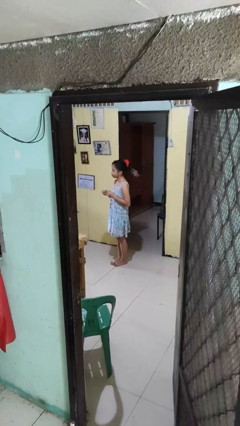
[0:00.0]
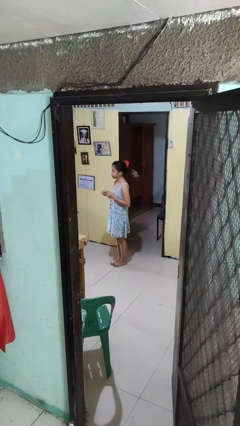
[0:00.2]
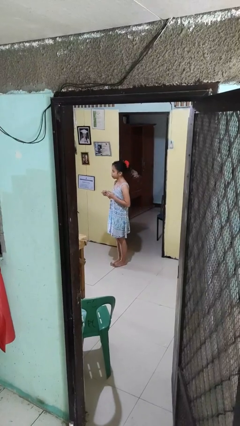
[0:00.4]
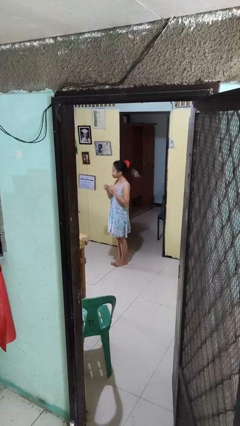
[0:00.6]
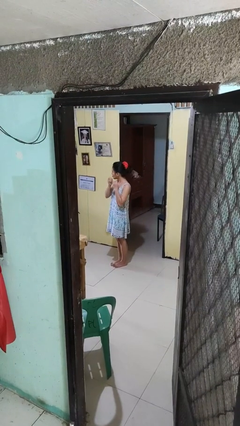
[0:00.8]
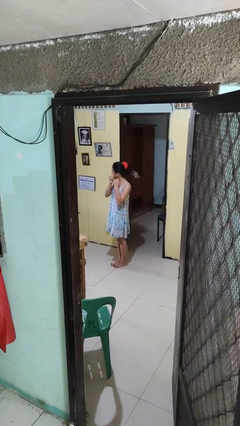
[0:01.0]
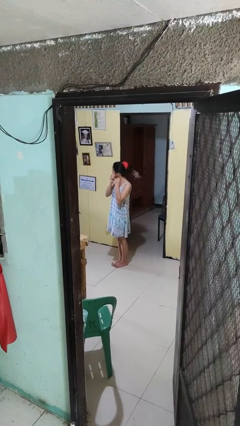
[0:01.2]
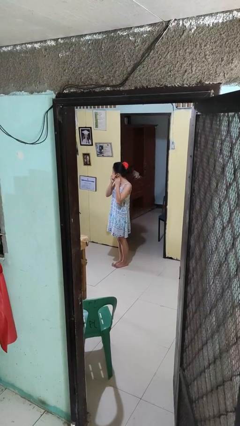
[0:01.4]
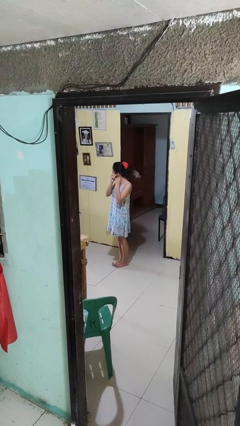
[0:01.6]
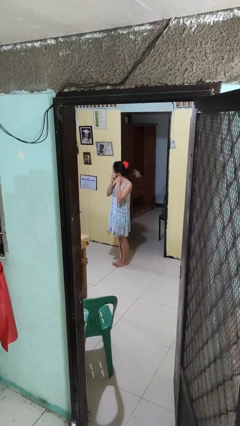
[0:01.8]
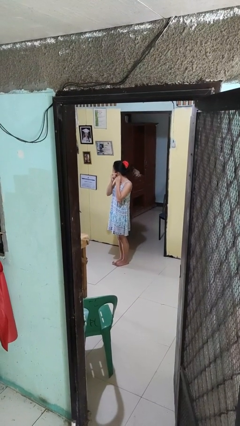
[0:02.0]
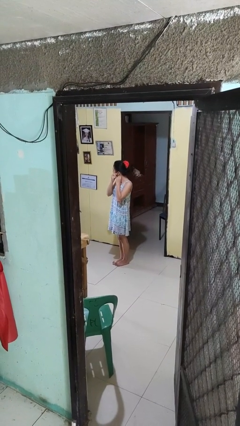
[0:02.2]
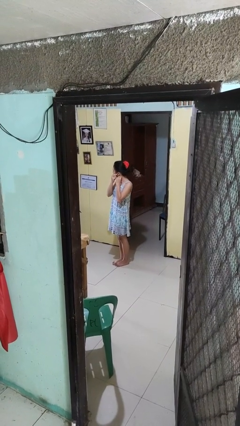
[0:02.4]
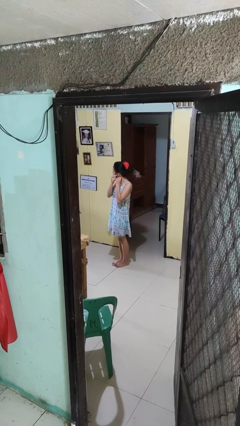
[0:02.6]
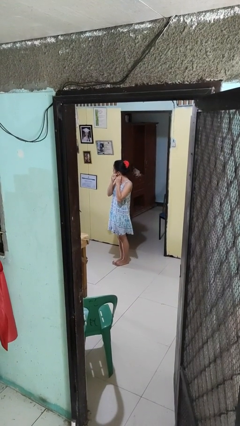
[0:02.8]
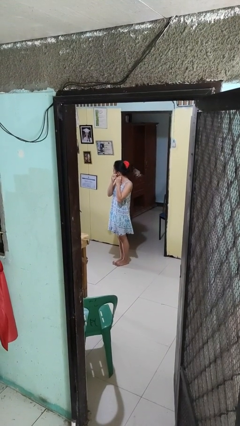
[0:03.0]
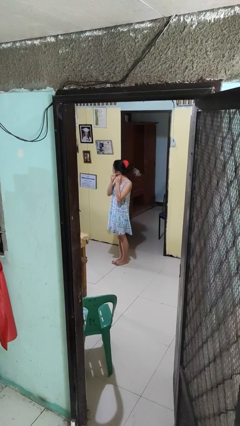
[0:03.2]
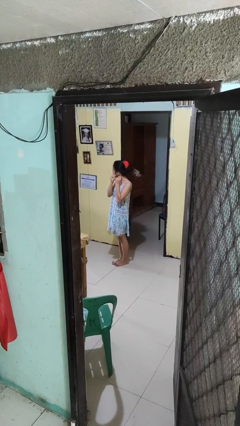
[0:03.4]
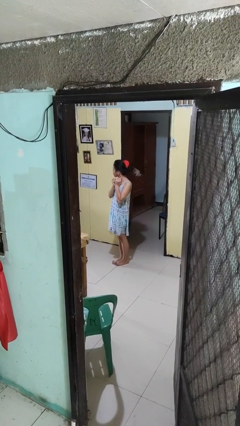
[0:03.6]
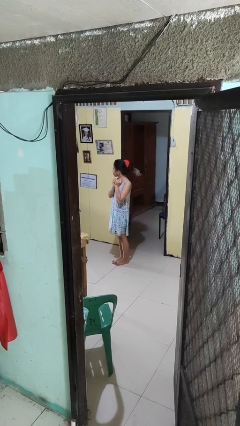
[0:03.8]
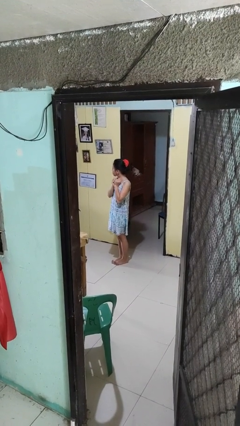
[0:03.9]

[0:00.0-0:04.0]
person puts on earrings

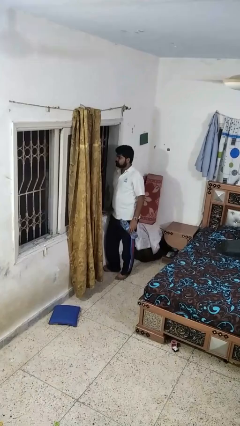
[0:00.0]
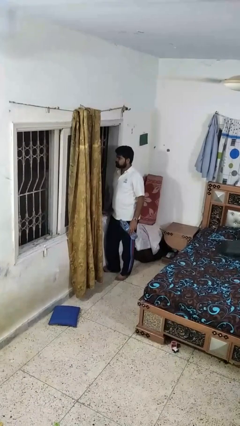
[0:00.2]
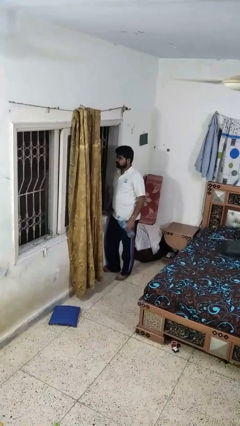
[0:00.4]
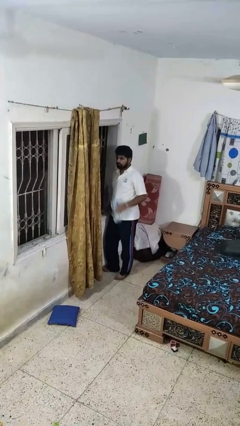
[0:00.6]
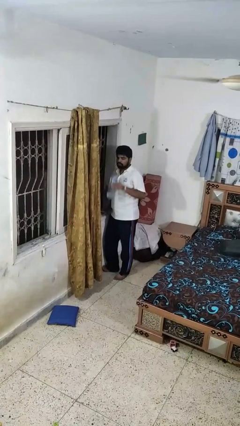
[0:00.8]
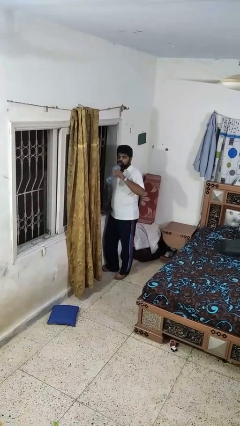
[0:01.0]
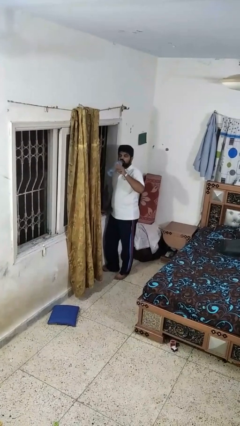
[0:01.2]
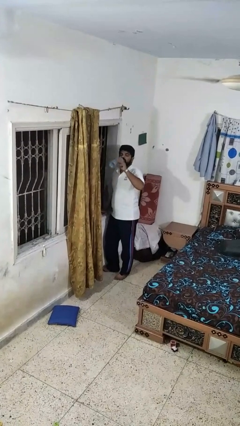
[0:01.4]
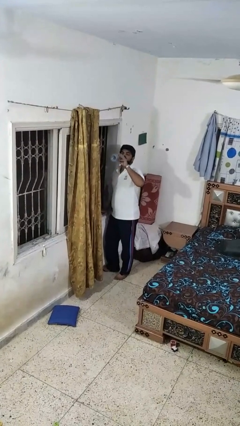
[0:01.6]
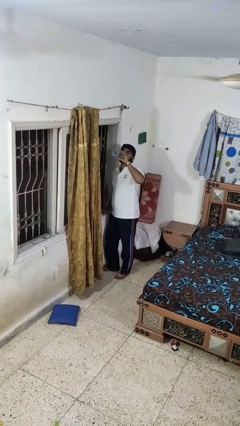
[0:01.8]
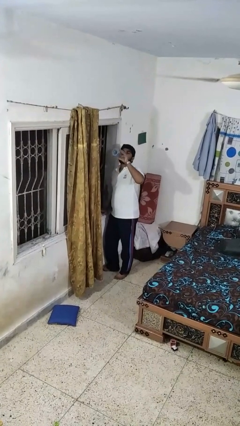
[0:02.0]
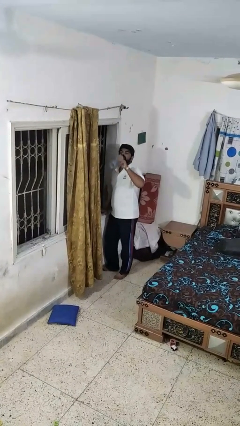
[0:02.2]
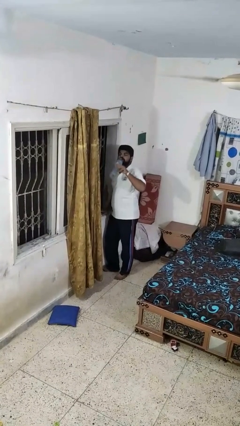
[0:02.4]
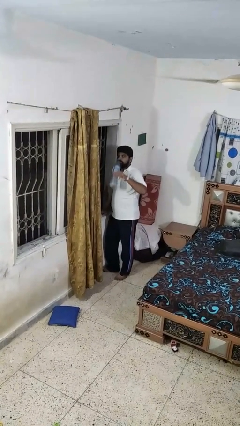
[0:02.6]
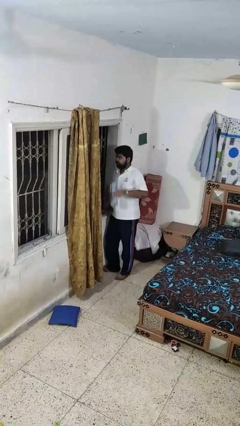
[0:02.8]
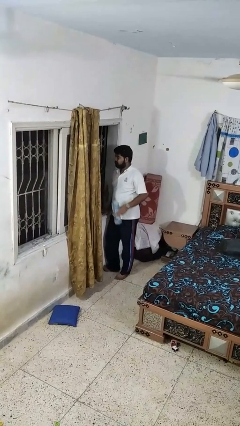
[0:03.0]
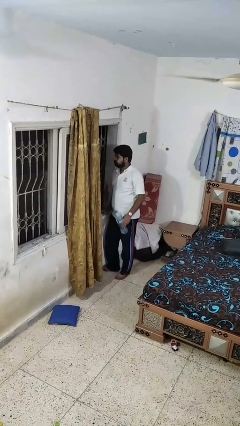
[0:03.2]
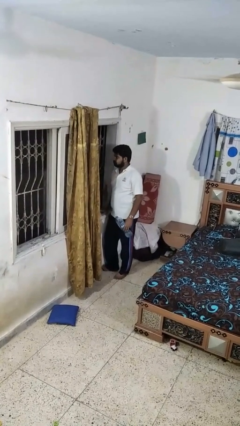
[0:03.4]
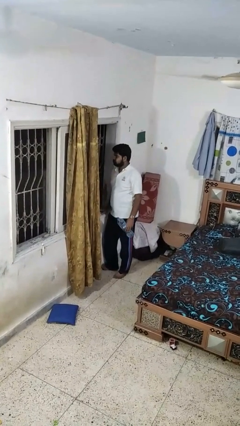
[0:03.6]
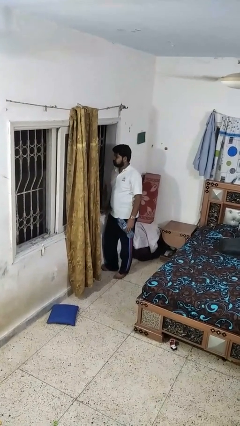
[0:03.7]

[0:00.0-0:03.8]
person drinks from bottle

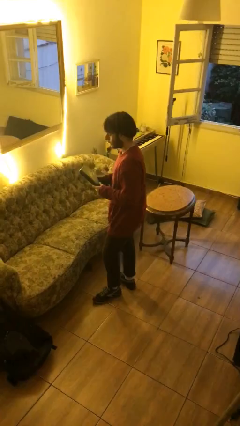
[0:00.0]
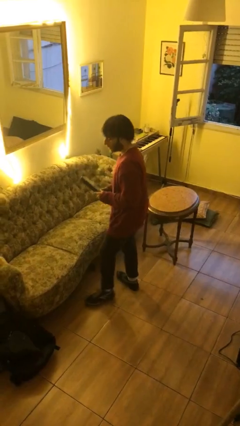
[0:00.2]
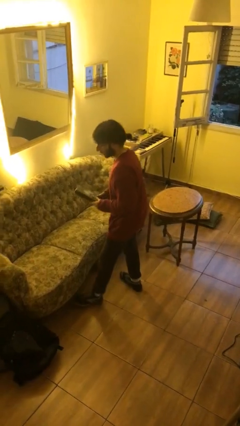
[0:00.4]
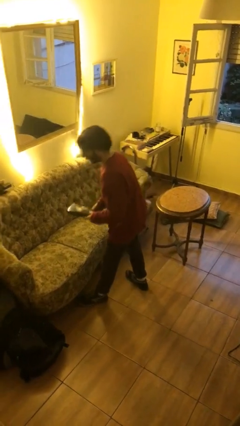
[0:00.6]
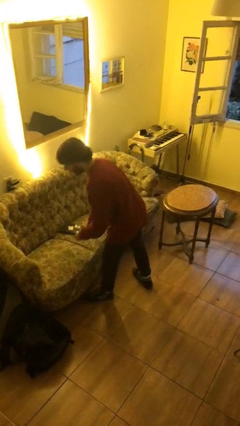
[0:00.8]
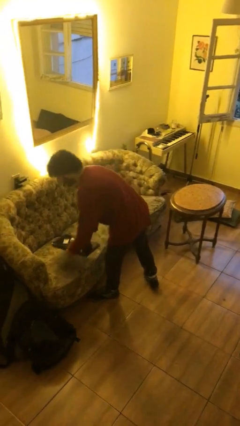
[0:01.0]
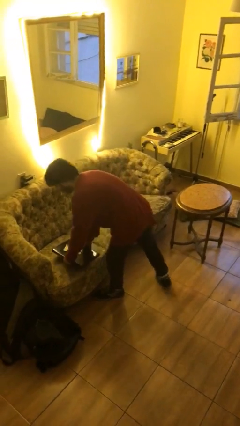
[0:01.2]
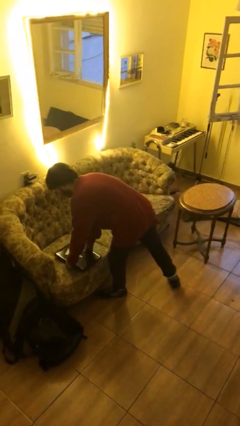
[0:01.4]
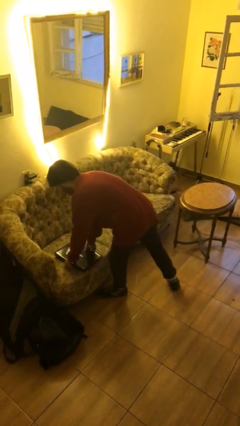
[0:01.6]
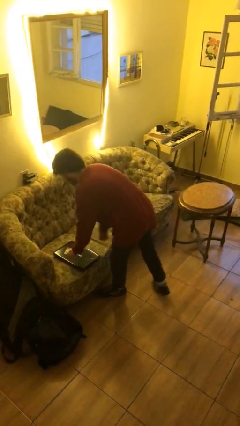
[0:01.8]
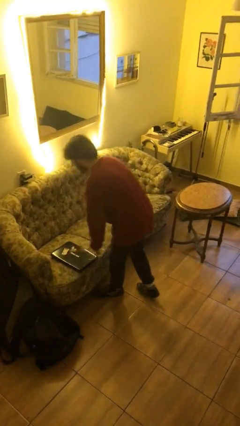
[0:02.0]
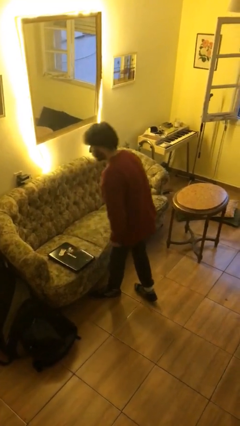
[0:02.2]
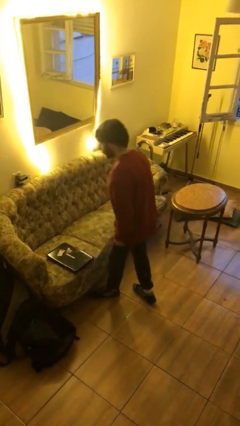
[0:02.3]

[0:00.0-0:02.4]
person puts down object on couch

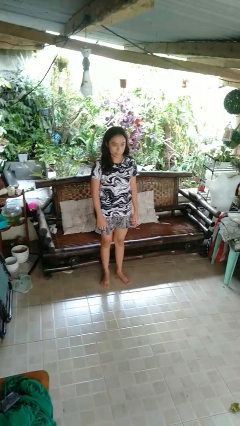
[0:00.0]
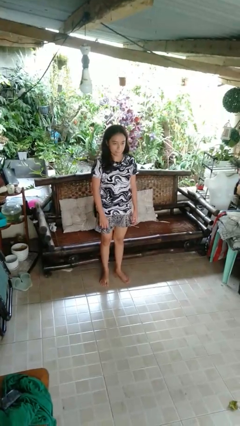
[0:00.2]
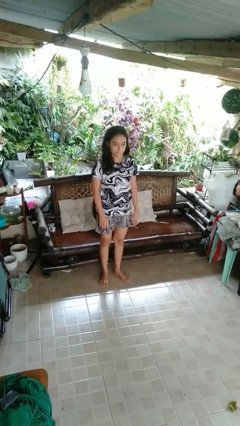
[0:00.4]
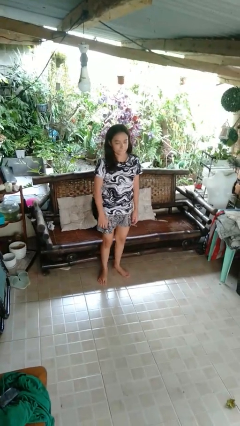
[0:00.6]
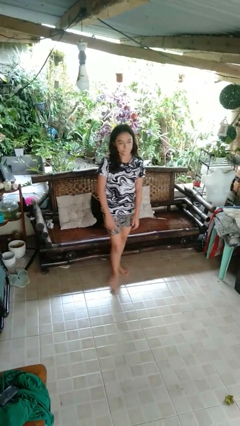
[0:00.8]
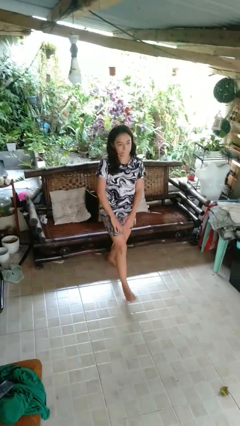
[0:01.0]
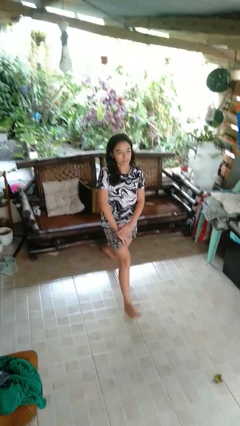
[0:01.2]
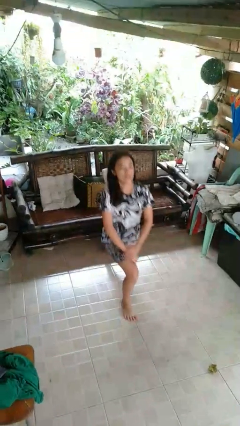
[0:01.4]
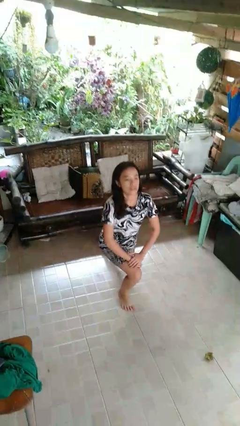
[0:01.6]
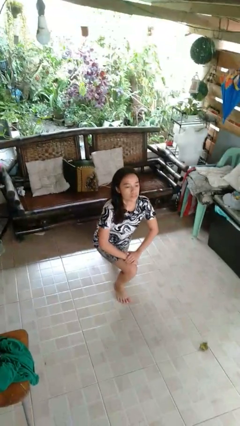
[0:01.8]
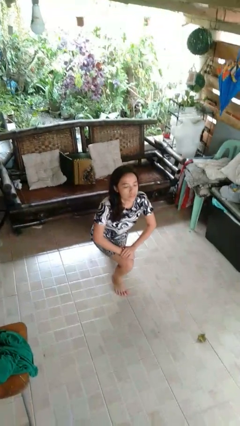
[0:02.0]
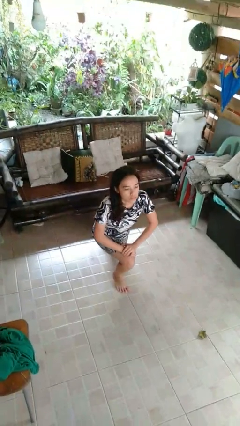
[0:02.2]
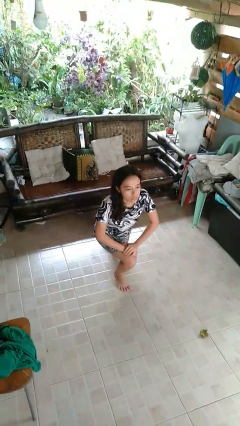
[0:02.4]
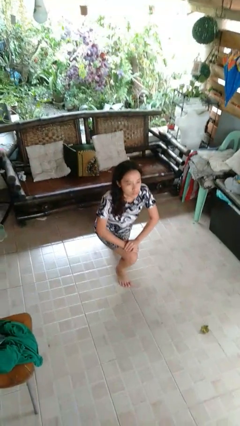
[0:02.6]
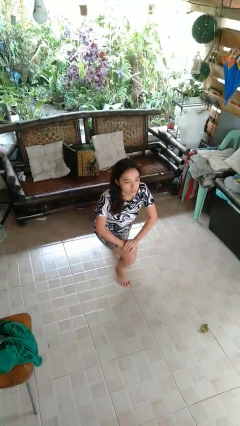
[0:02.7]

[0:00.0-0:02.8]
person exercises with lunges

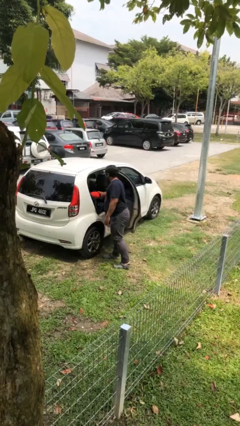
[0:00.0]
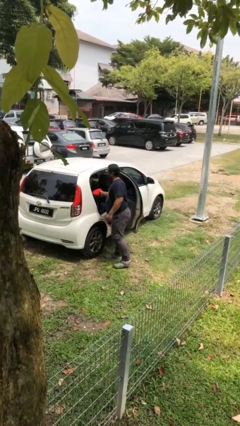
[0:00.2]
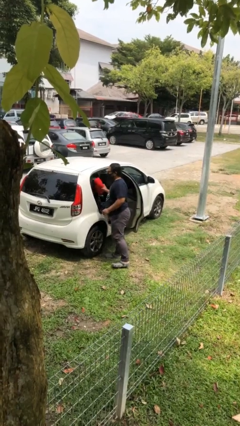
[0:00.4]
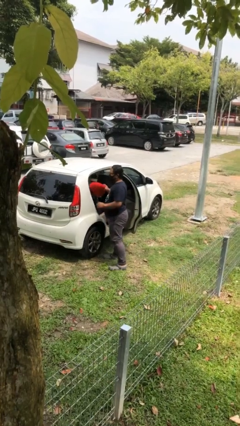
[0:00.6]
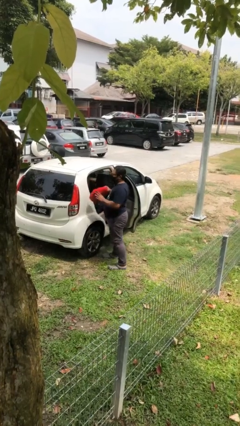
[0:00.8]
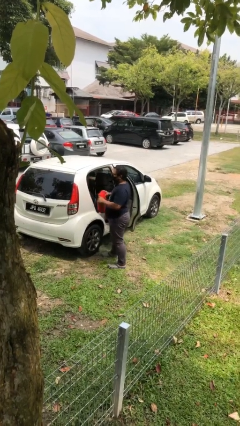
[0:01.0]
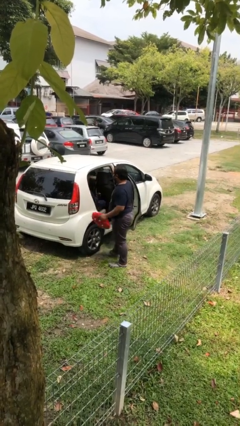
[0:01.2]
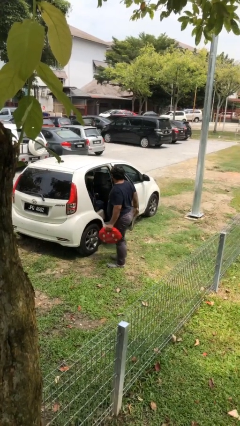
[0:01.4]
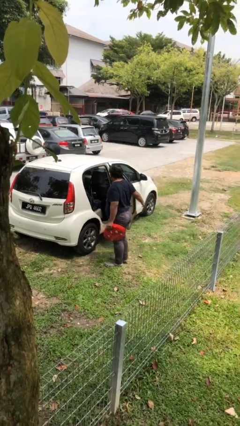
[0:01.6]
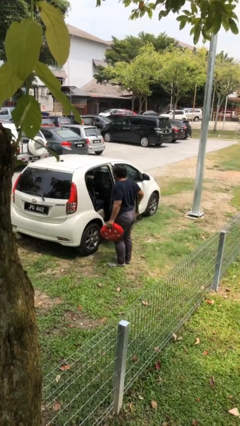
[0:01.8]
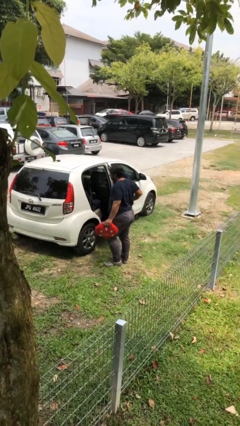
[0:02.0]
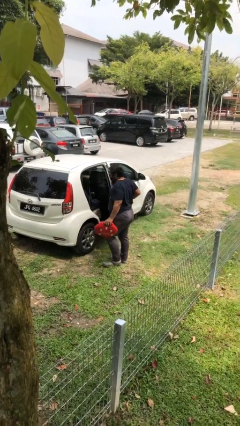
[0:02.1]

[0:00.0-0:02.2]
person unloads car

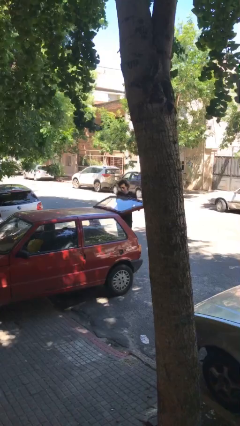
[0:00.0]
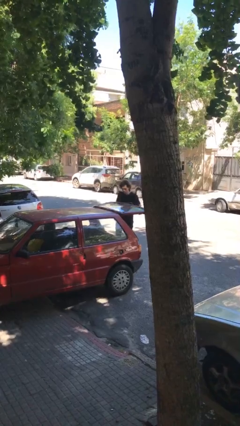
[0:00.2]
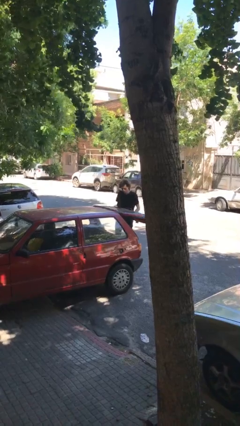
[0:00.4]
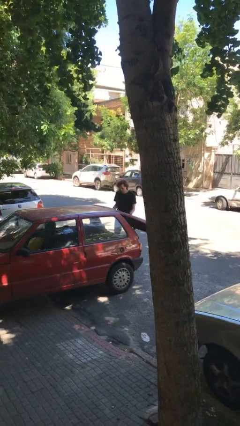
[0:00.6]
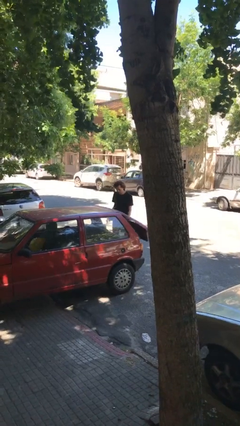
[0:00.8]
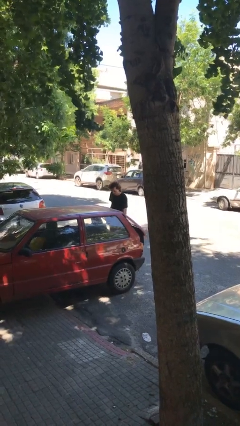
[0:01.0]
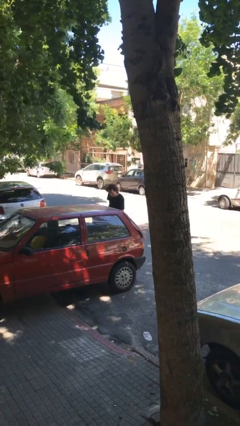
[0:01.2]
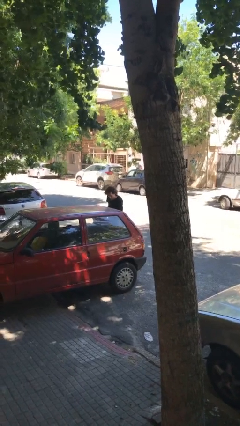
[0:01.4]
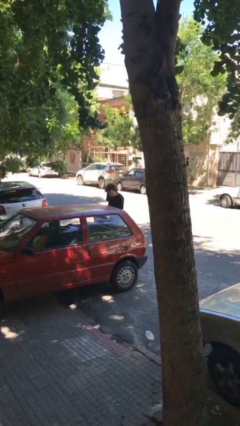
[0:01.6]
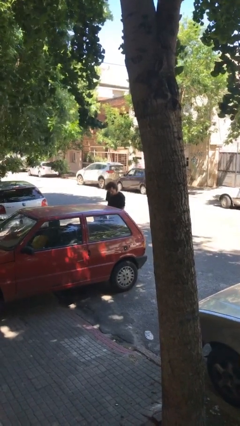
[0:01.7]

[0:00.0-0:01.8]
person closes car trunk
